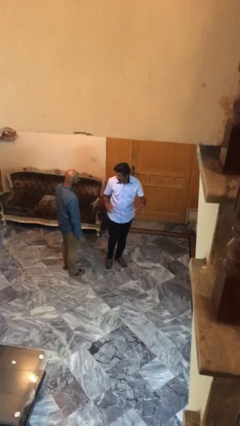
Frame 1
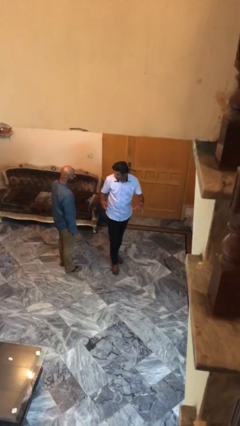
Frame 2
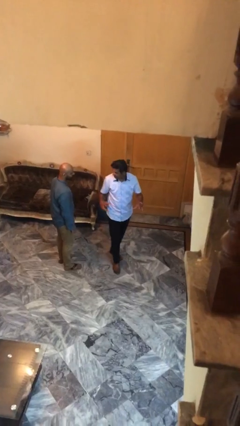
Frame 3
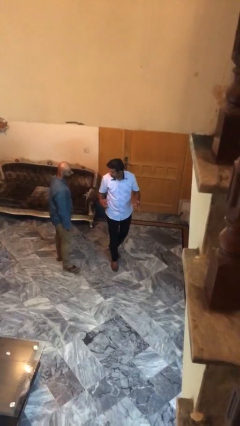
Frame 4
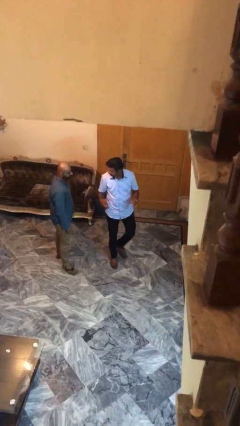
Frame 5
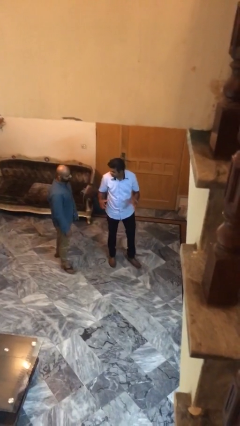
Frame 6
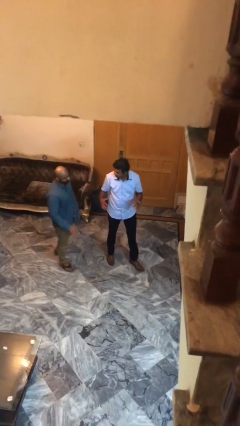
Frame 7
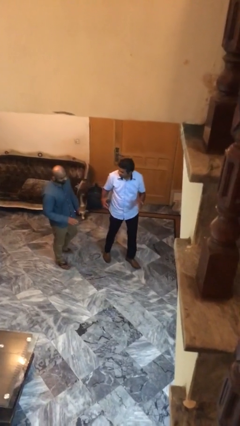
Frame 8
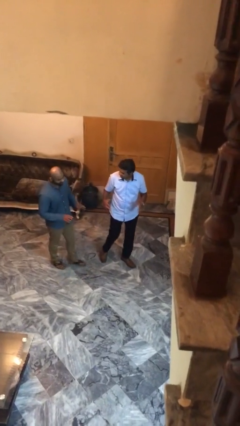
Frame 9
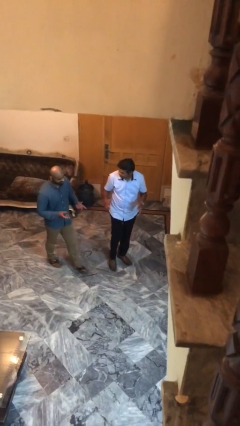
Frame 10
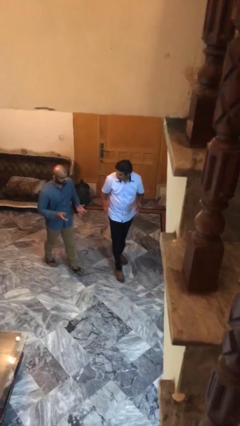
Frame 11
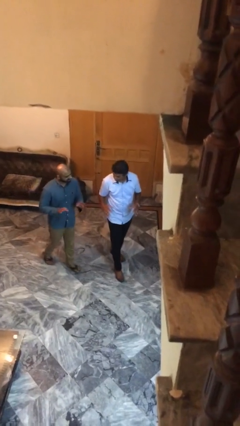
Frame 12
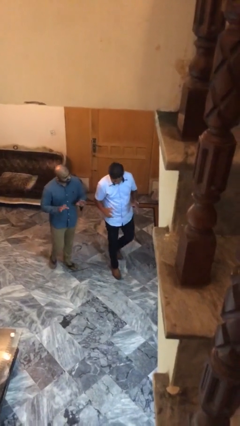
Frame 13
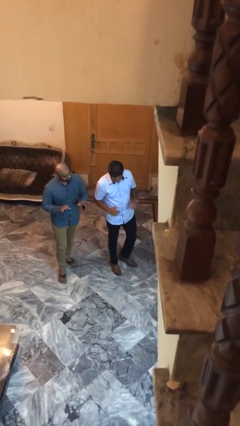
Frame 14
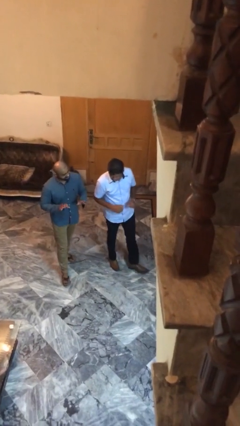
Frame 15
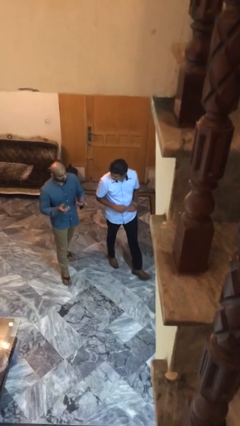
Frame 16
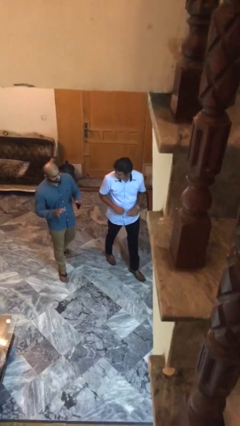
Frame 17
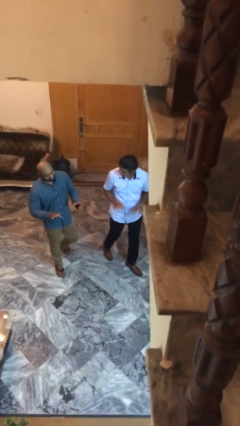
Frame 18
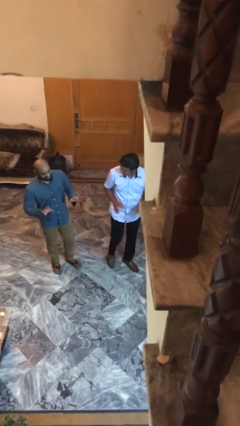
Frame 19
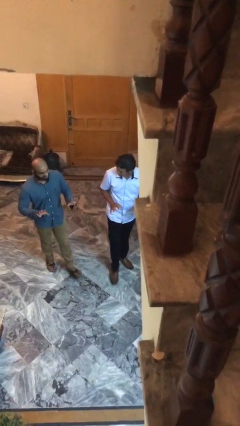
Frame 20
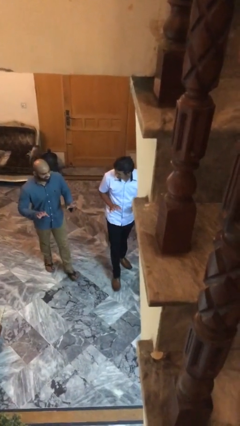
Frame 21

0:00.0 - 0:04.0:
person talks to person

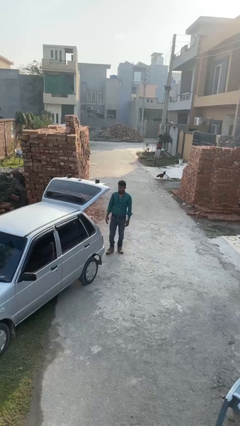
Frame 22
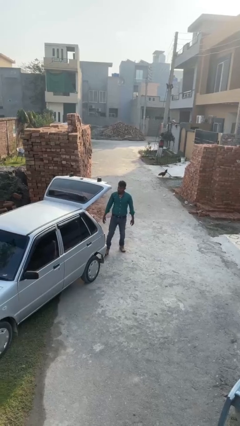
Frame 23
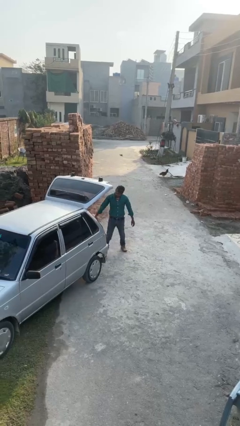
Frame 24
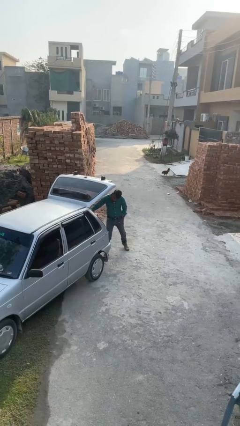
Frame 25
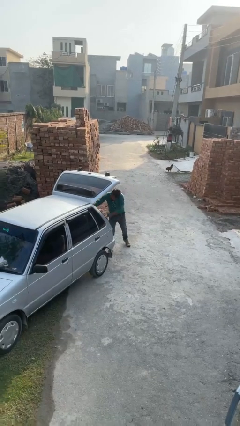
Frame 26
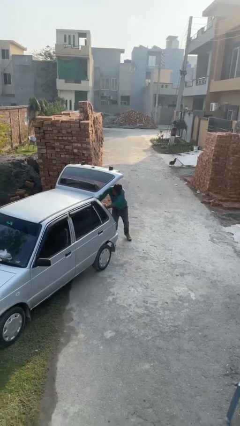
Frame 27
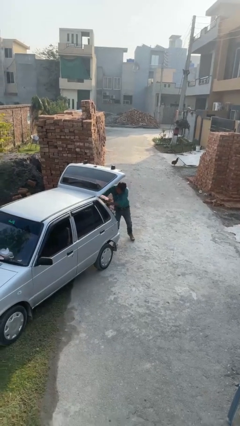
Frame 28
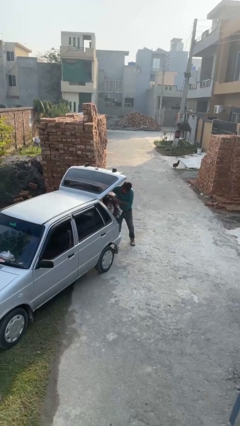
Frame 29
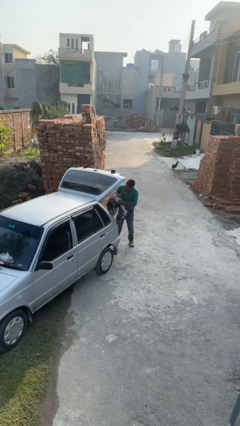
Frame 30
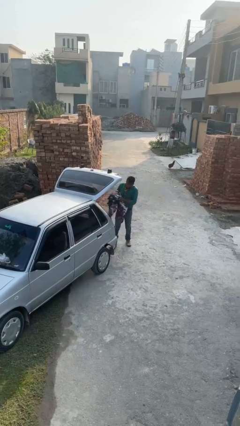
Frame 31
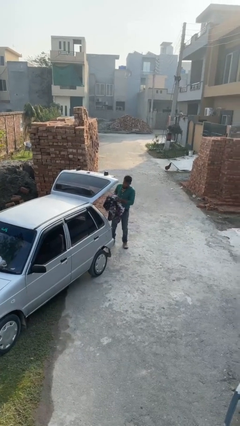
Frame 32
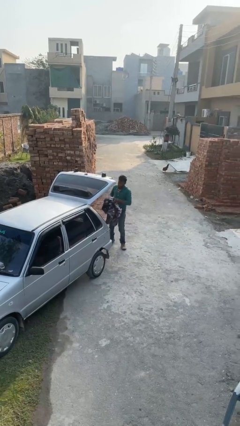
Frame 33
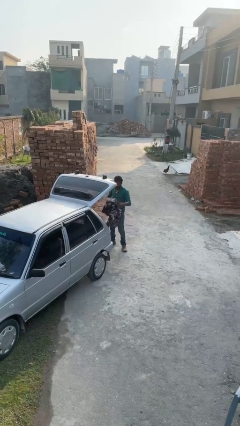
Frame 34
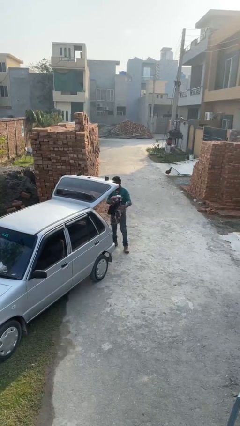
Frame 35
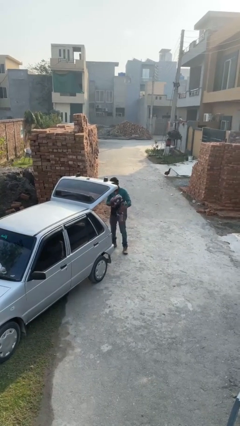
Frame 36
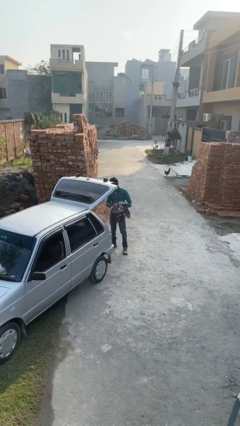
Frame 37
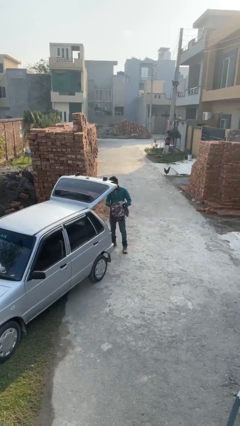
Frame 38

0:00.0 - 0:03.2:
person unloads car

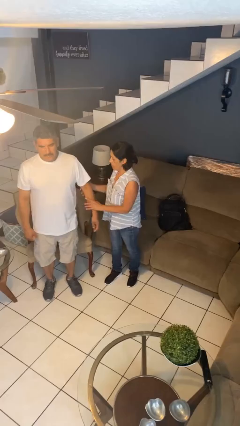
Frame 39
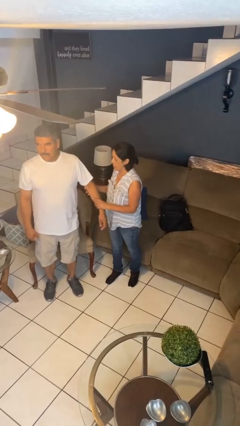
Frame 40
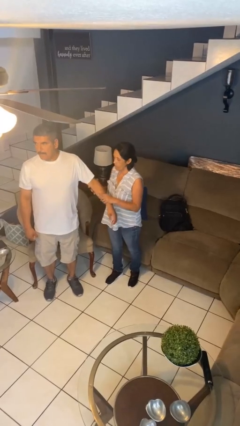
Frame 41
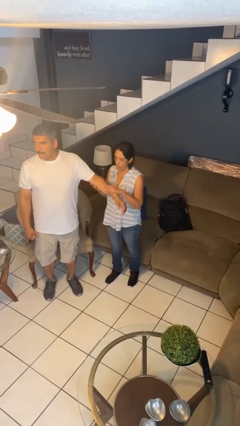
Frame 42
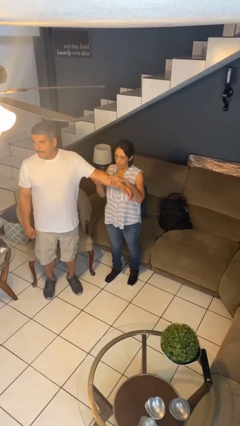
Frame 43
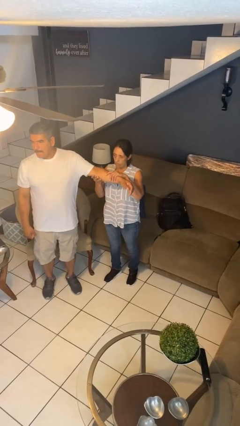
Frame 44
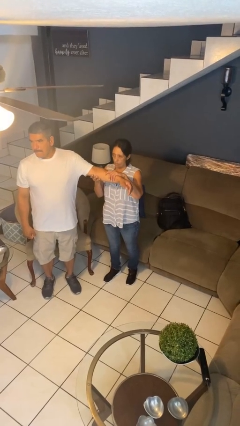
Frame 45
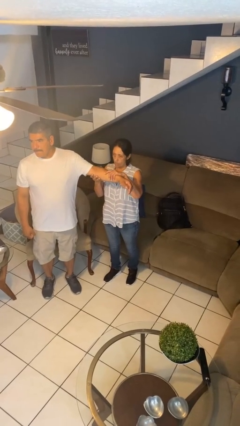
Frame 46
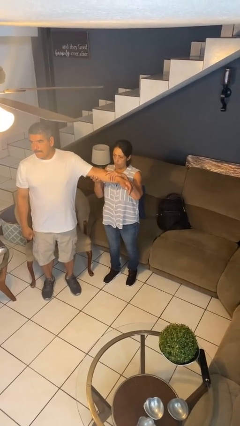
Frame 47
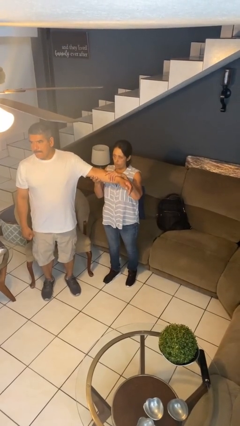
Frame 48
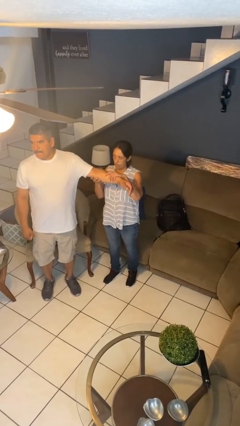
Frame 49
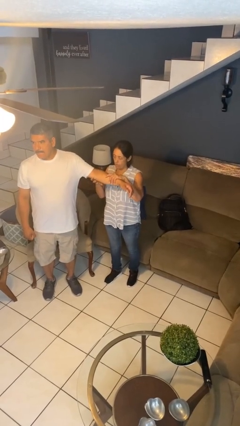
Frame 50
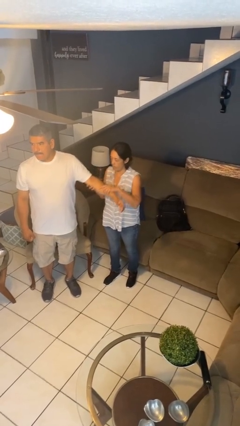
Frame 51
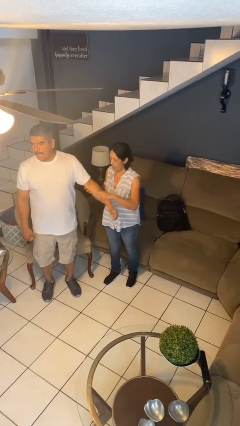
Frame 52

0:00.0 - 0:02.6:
person grabs person by forearm

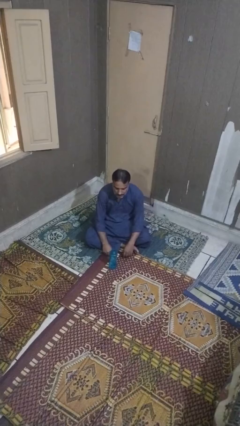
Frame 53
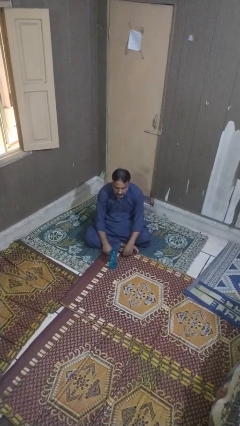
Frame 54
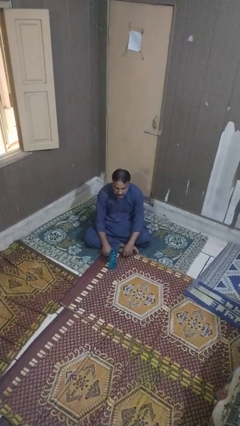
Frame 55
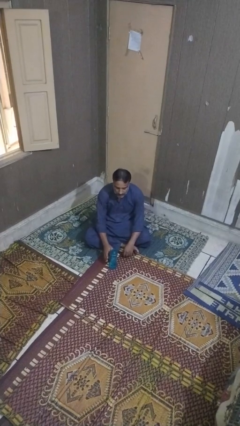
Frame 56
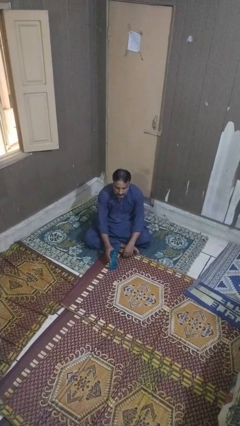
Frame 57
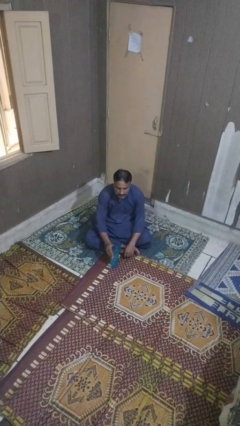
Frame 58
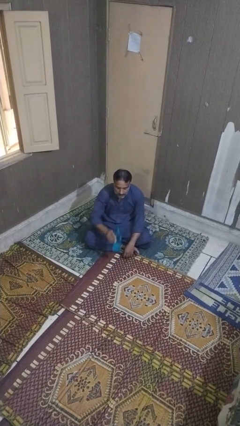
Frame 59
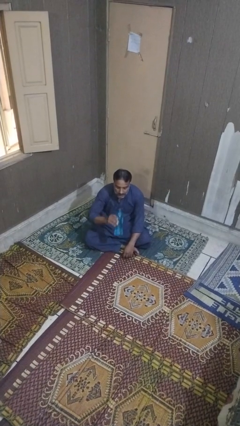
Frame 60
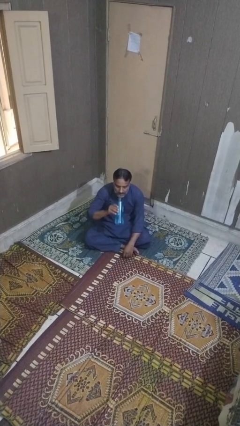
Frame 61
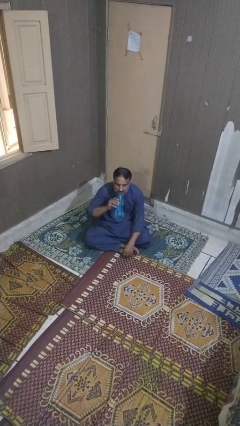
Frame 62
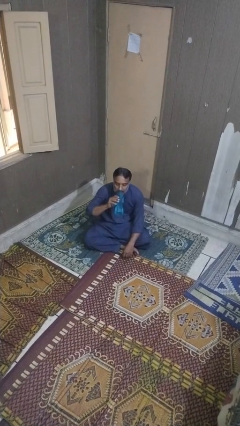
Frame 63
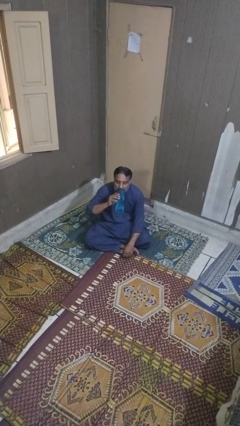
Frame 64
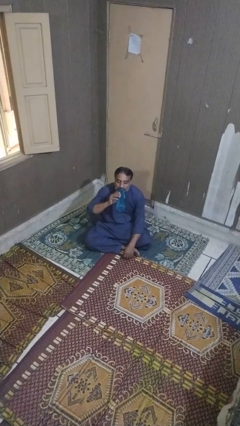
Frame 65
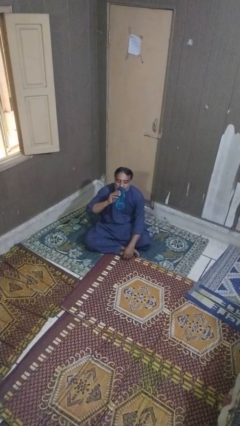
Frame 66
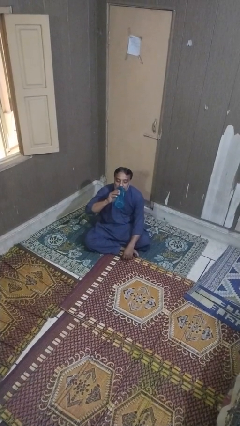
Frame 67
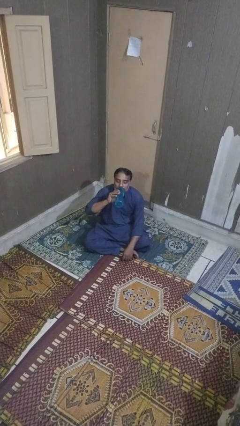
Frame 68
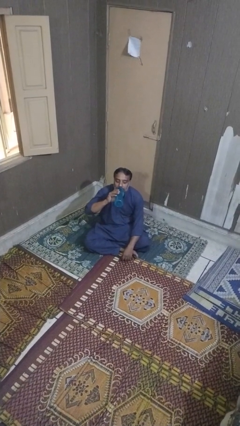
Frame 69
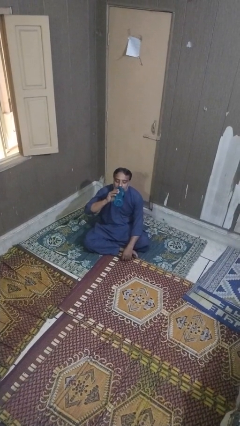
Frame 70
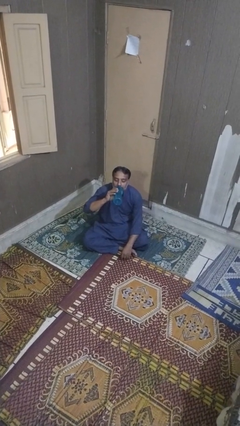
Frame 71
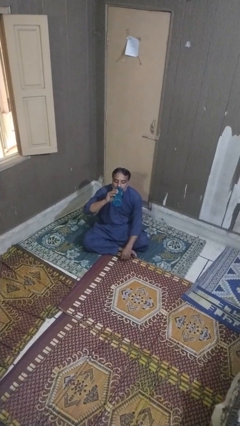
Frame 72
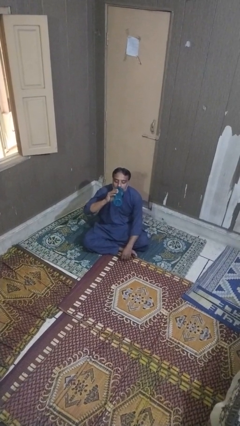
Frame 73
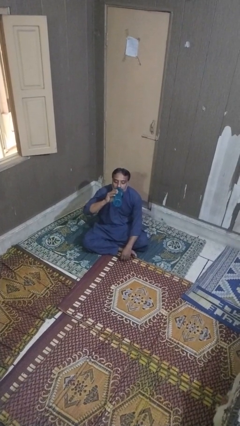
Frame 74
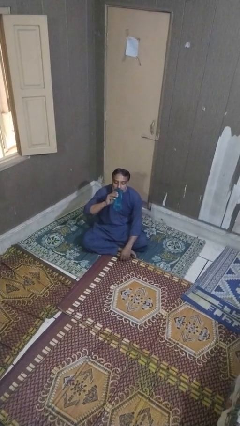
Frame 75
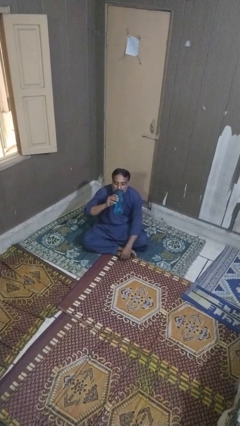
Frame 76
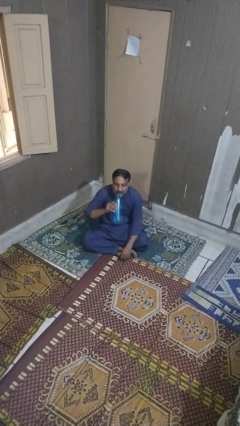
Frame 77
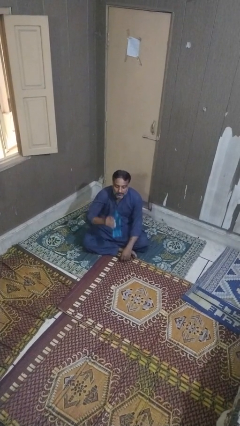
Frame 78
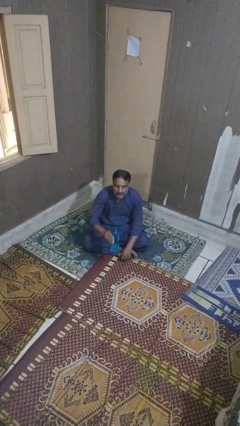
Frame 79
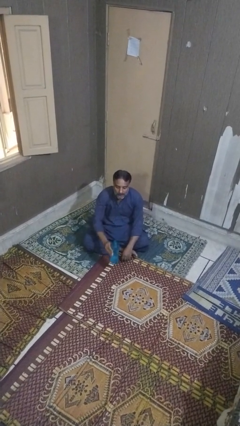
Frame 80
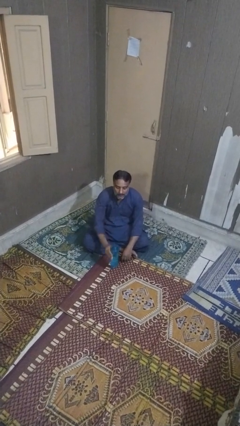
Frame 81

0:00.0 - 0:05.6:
person drinks from bottle

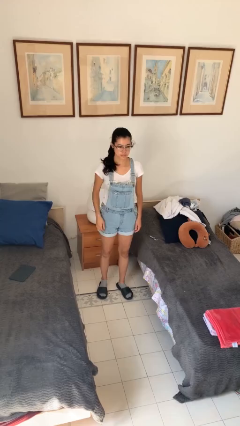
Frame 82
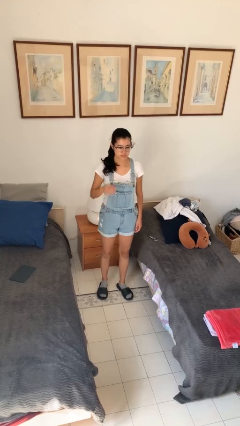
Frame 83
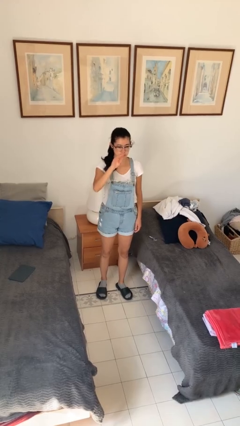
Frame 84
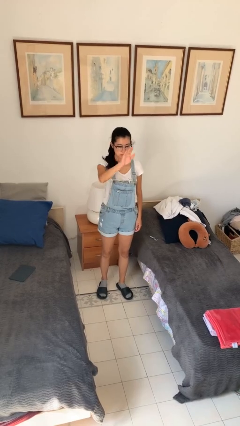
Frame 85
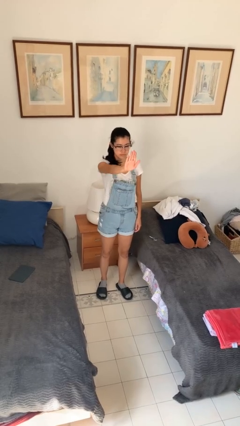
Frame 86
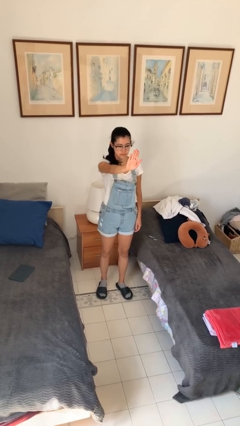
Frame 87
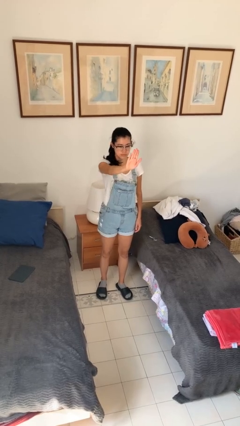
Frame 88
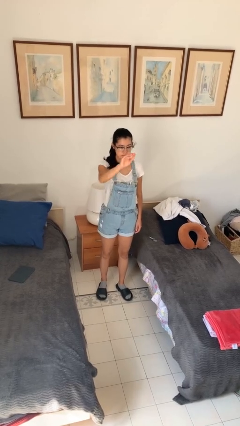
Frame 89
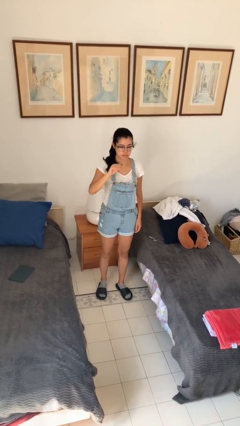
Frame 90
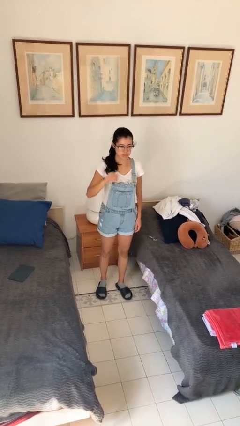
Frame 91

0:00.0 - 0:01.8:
person gestures stop

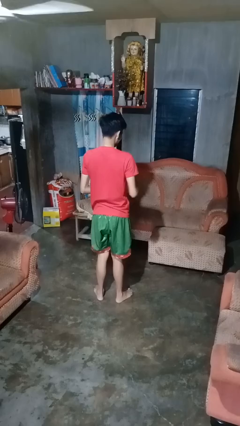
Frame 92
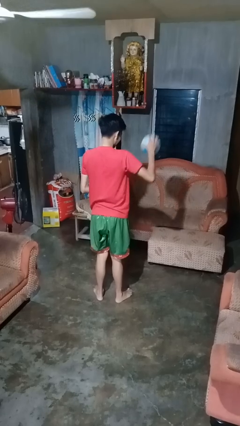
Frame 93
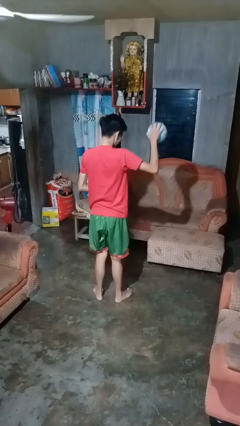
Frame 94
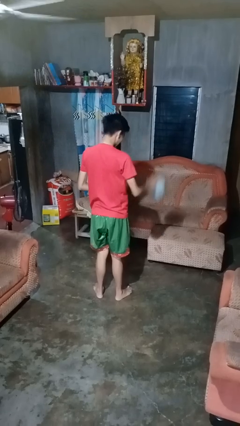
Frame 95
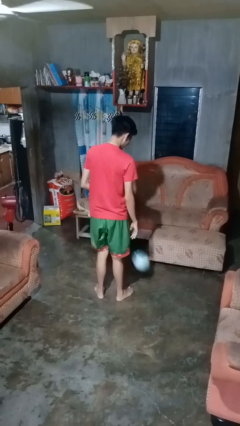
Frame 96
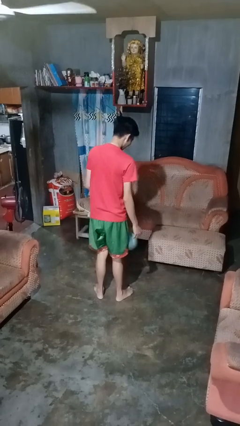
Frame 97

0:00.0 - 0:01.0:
person bounces ball on floor
